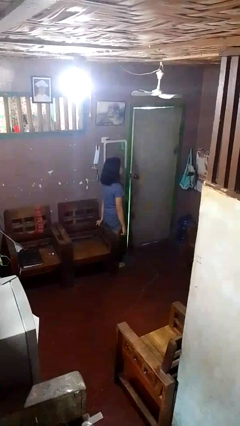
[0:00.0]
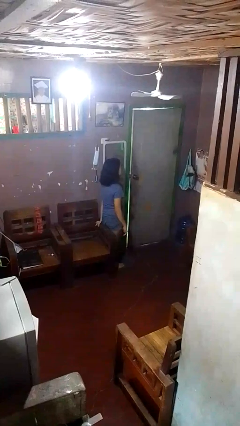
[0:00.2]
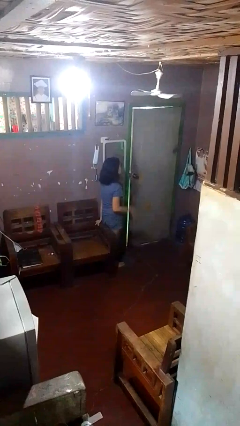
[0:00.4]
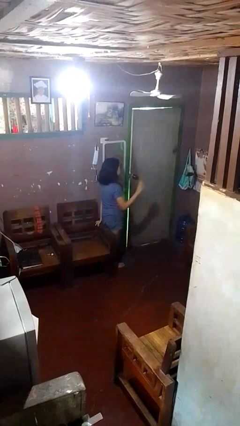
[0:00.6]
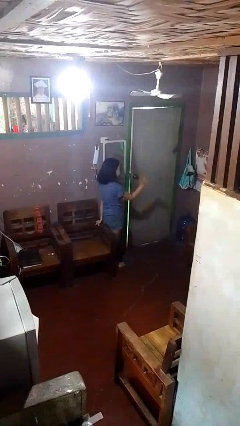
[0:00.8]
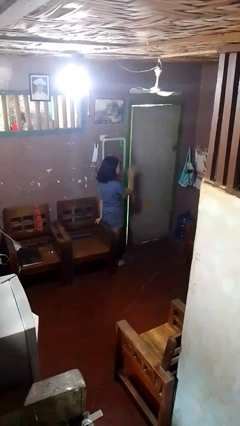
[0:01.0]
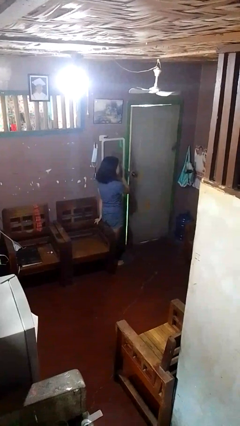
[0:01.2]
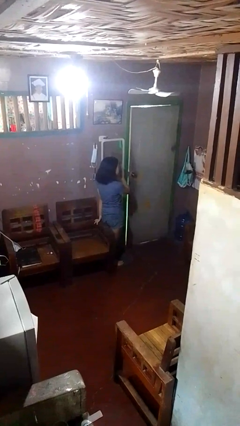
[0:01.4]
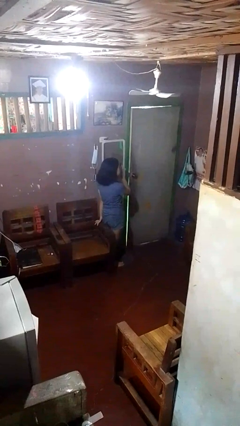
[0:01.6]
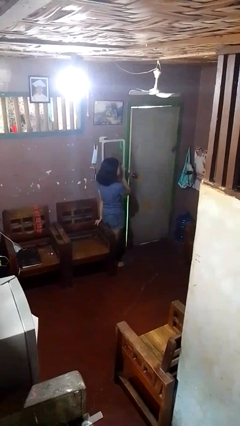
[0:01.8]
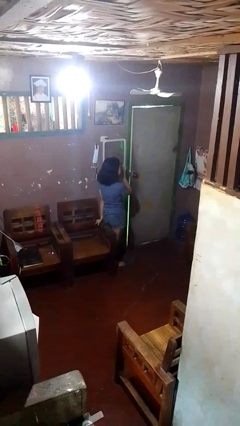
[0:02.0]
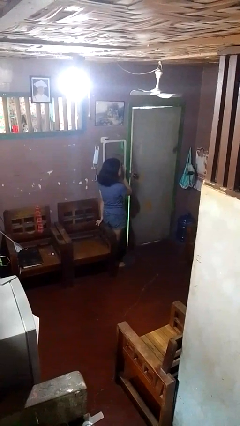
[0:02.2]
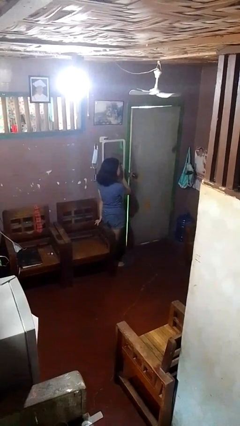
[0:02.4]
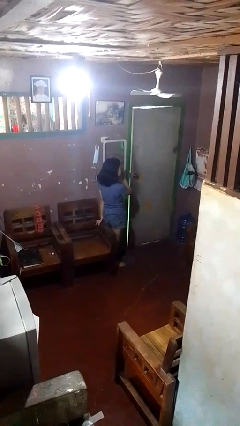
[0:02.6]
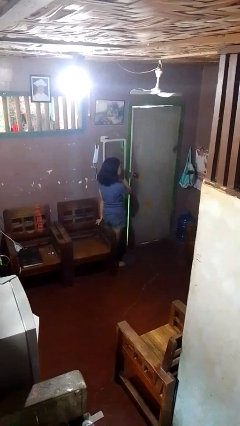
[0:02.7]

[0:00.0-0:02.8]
person gestures swipe left

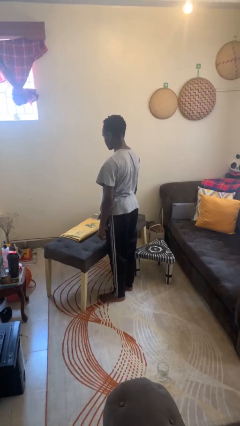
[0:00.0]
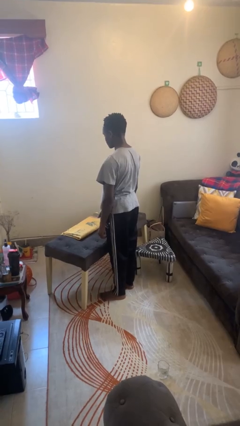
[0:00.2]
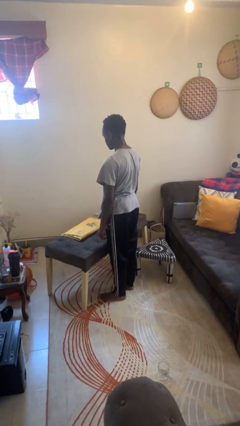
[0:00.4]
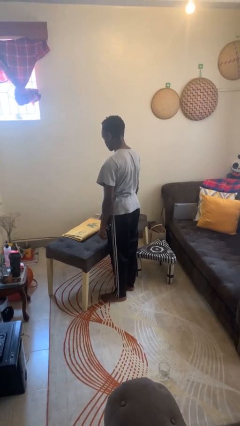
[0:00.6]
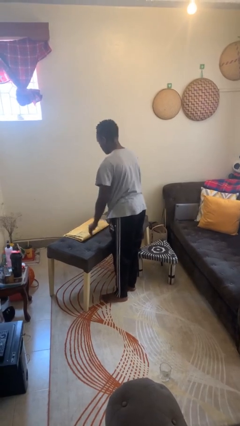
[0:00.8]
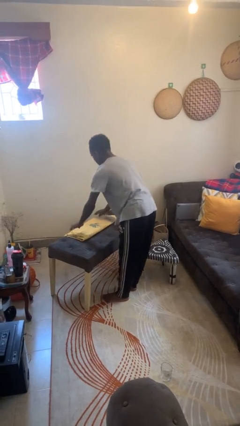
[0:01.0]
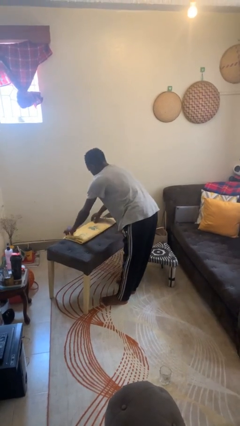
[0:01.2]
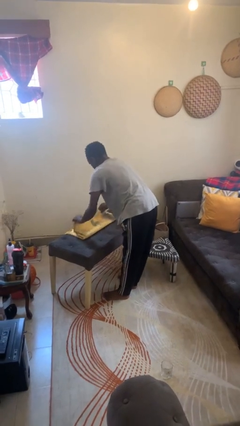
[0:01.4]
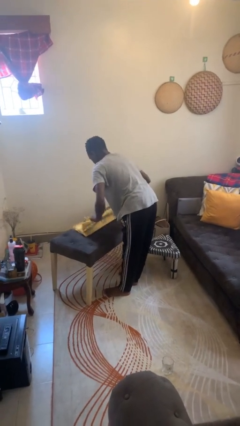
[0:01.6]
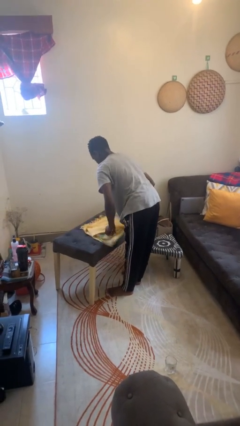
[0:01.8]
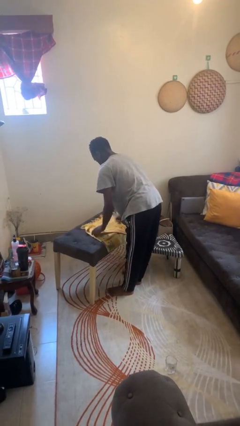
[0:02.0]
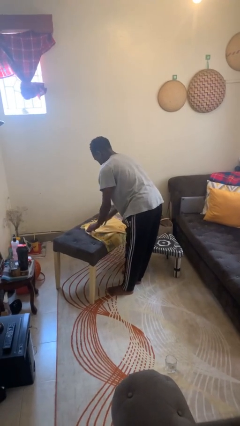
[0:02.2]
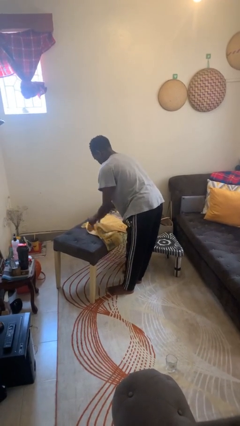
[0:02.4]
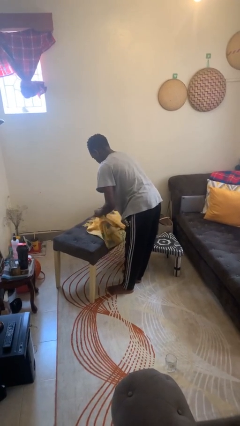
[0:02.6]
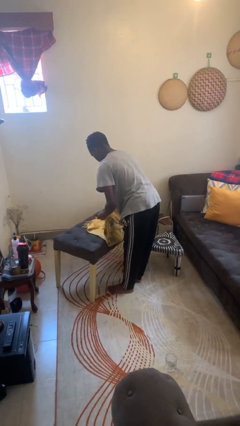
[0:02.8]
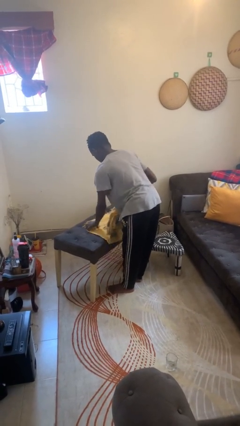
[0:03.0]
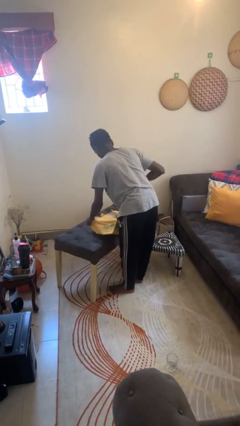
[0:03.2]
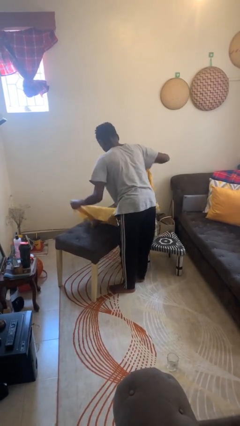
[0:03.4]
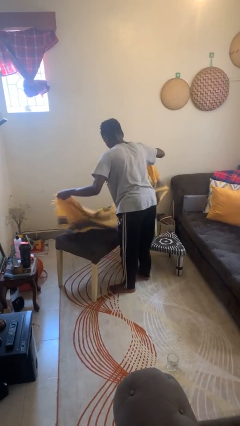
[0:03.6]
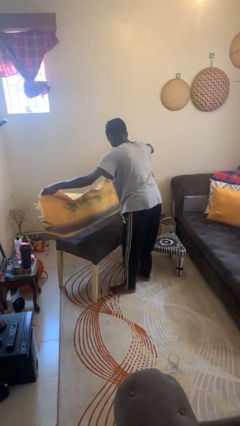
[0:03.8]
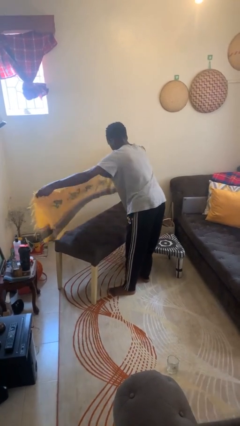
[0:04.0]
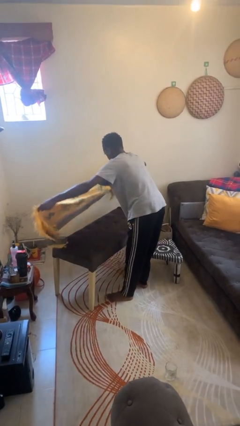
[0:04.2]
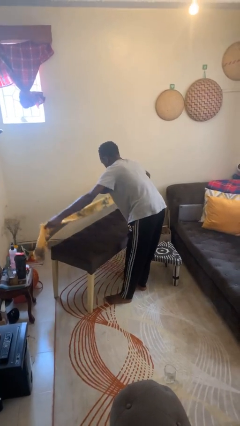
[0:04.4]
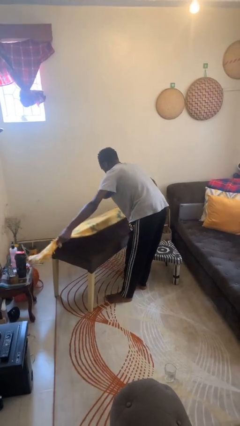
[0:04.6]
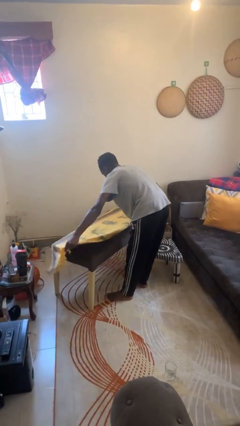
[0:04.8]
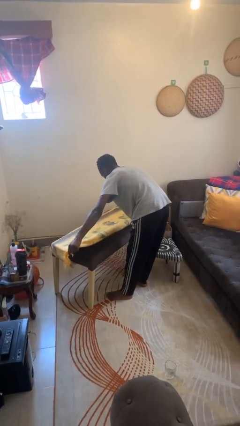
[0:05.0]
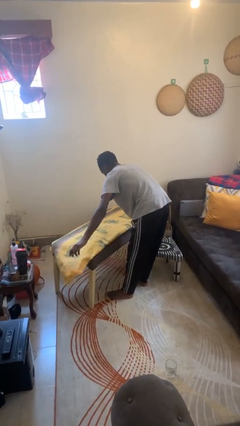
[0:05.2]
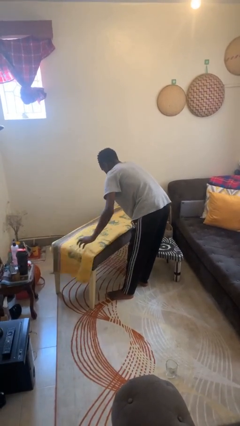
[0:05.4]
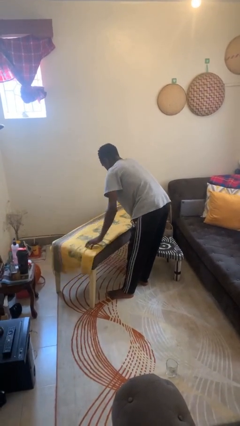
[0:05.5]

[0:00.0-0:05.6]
person spreads tablecloth

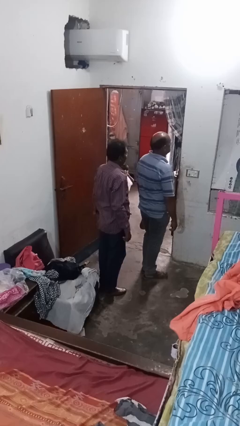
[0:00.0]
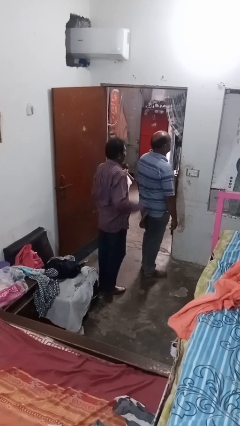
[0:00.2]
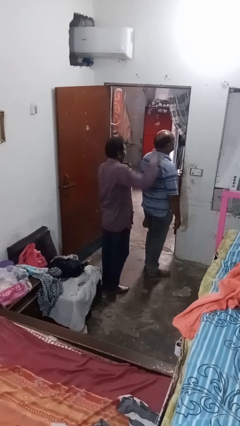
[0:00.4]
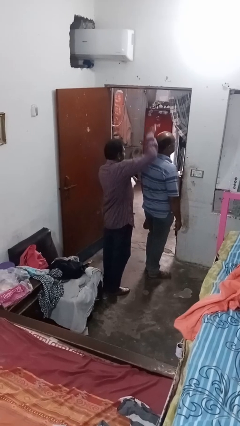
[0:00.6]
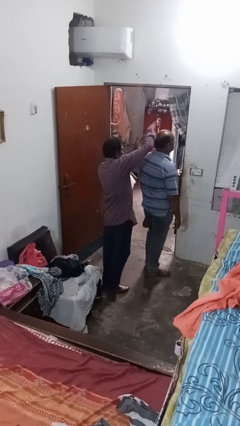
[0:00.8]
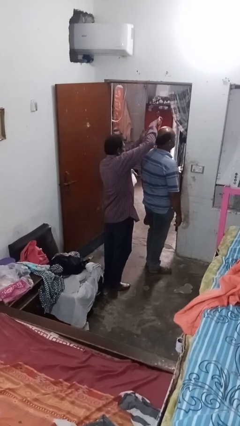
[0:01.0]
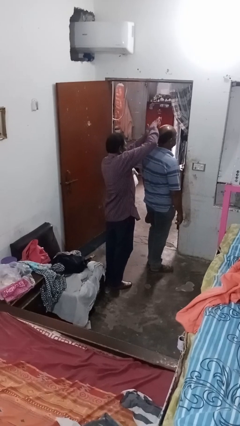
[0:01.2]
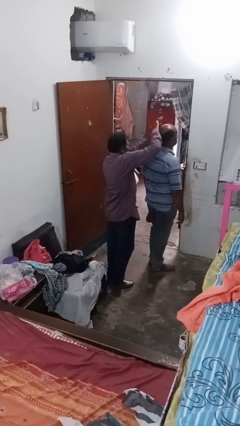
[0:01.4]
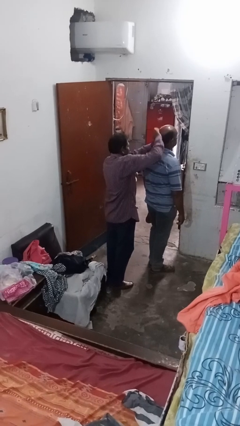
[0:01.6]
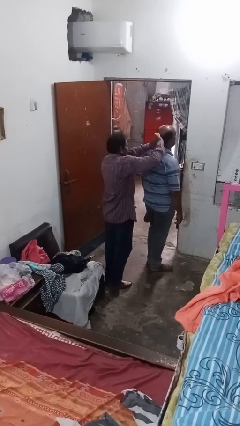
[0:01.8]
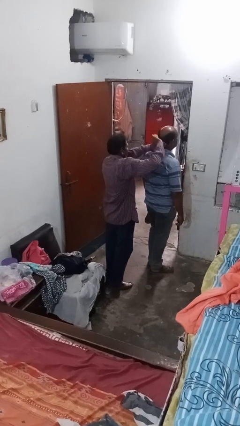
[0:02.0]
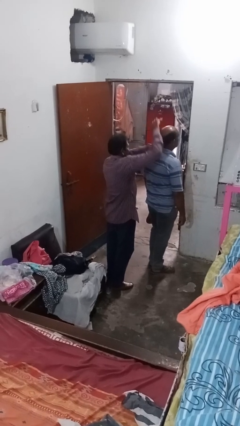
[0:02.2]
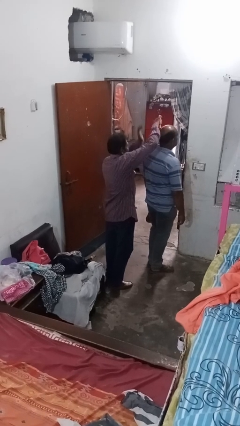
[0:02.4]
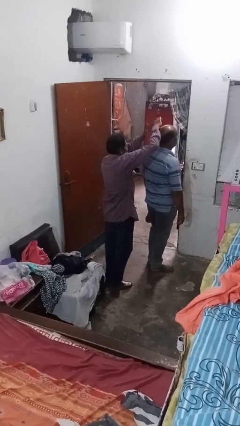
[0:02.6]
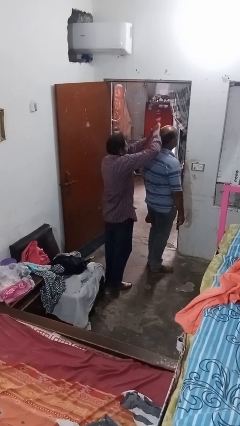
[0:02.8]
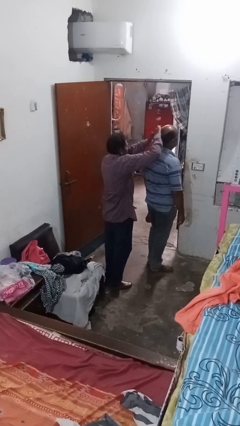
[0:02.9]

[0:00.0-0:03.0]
person brushes hair of person

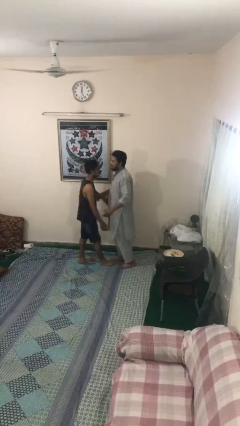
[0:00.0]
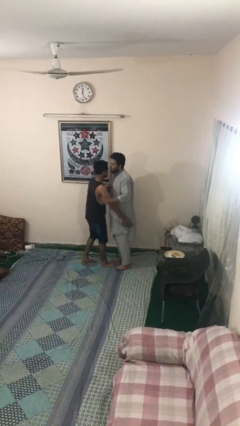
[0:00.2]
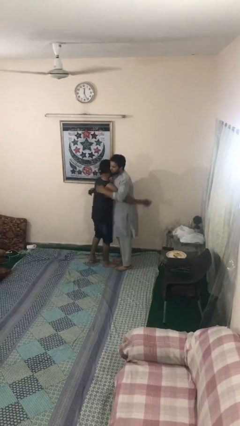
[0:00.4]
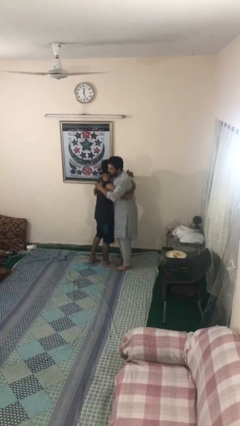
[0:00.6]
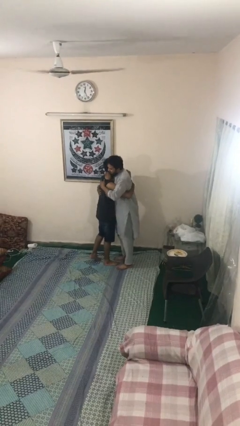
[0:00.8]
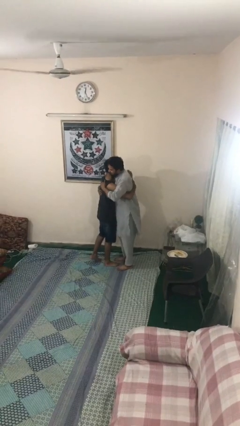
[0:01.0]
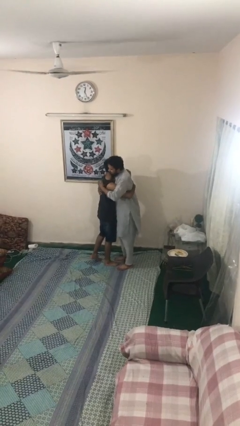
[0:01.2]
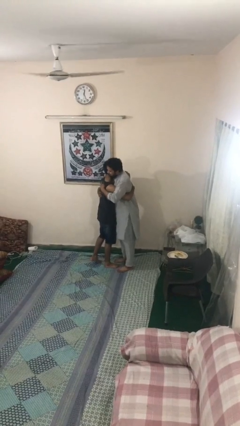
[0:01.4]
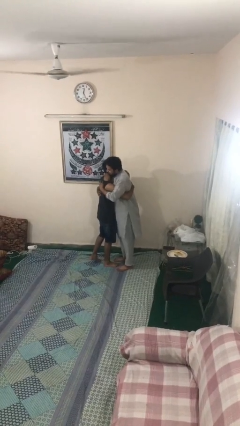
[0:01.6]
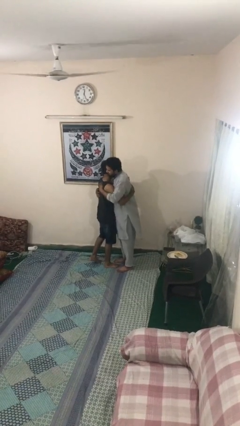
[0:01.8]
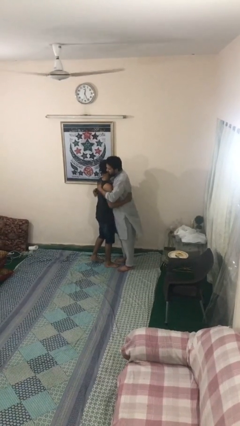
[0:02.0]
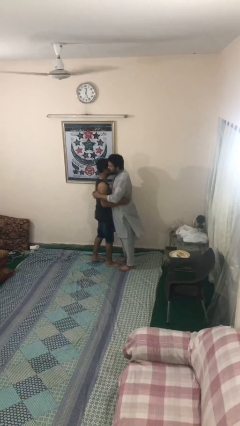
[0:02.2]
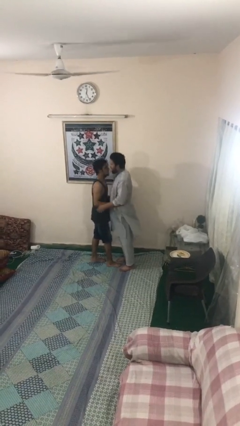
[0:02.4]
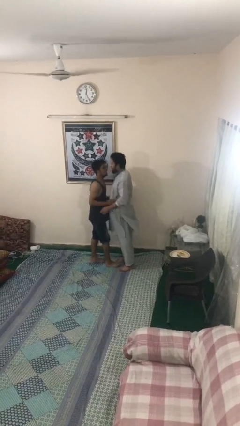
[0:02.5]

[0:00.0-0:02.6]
person embraces person

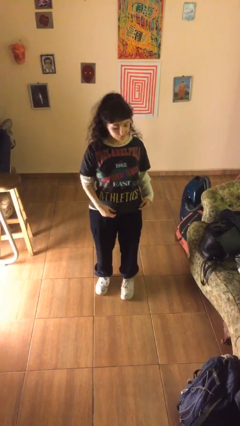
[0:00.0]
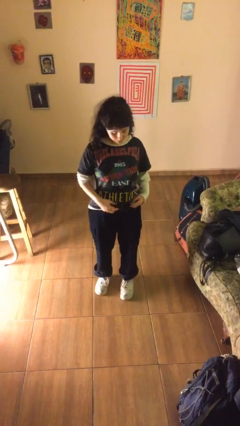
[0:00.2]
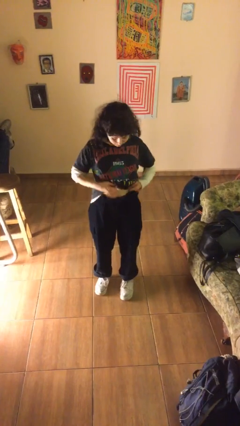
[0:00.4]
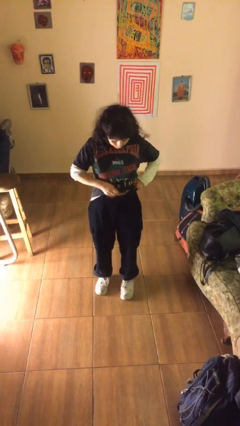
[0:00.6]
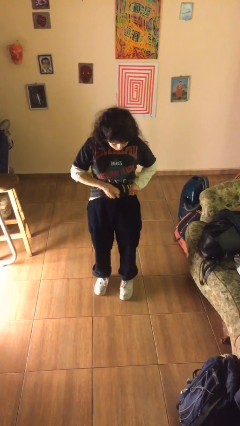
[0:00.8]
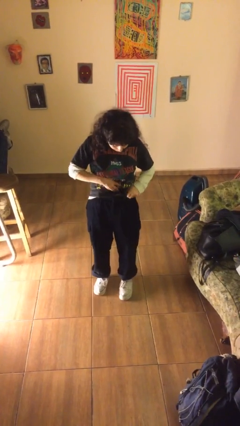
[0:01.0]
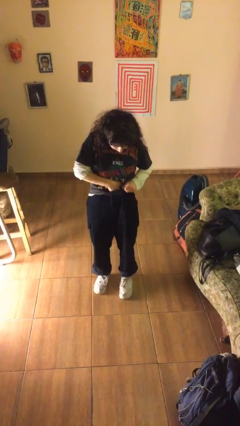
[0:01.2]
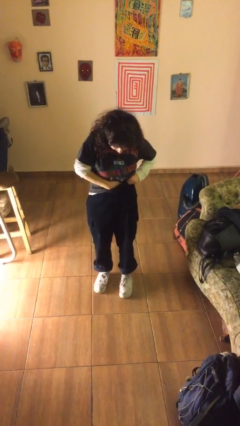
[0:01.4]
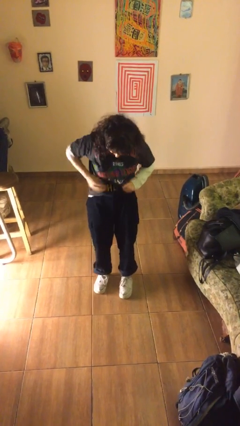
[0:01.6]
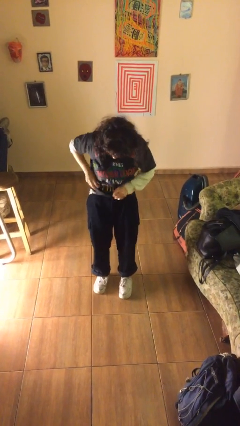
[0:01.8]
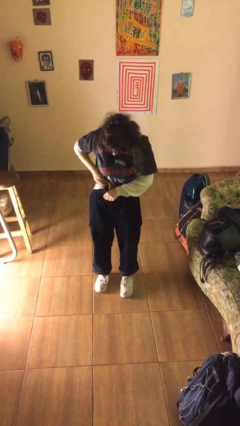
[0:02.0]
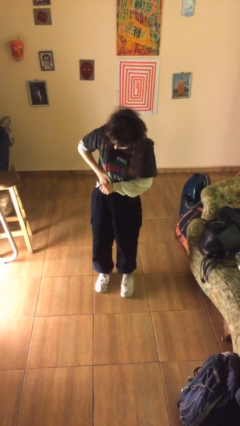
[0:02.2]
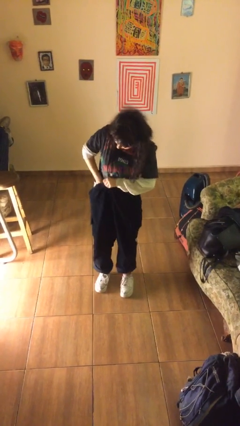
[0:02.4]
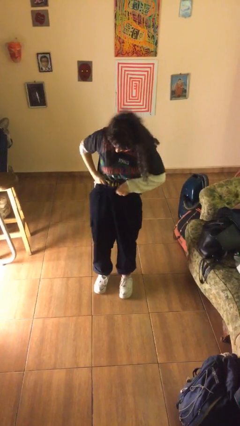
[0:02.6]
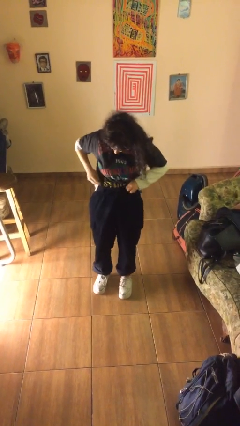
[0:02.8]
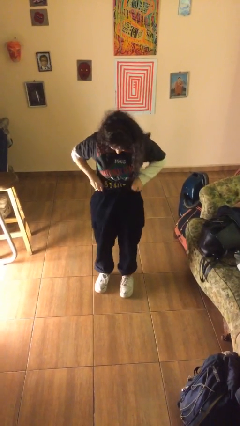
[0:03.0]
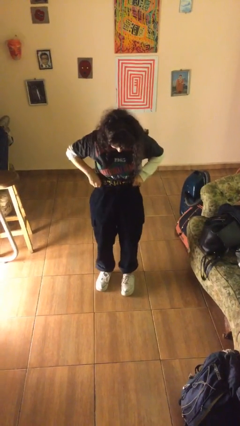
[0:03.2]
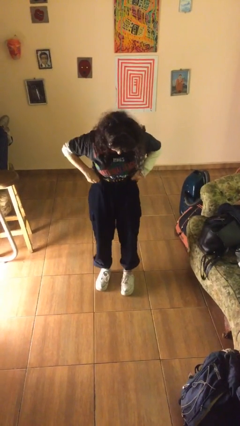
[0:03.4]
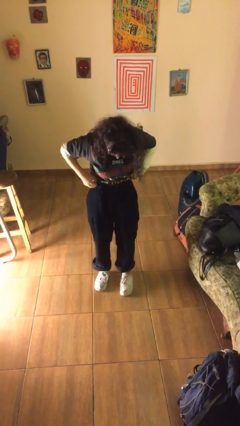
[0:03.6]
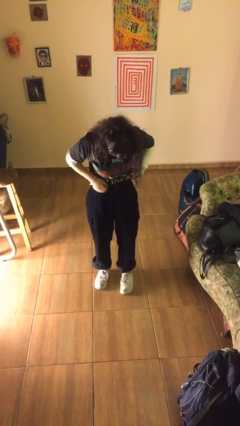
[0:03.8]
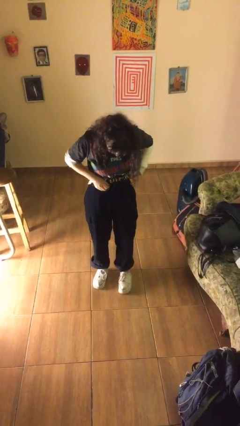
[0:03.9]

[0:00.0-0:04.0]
person tucks in shirt
